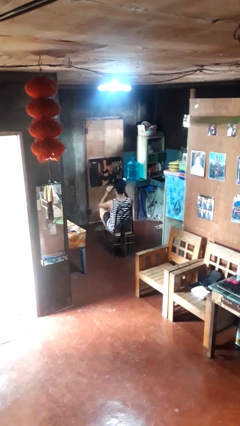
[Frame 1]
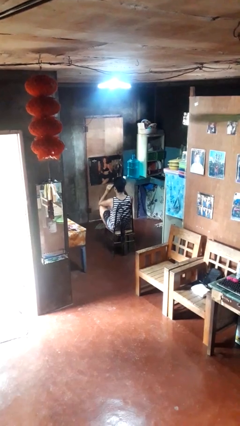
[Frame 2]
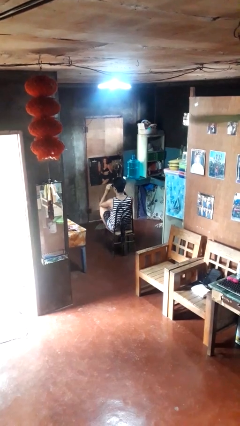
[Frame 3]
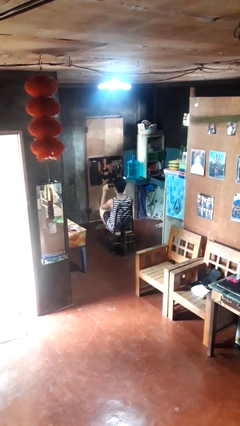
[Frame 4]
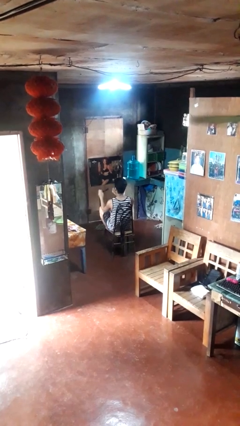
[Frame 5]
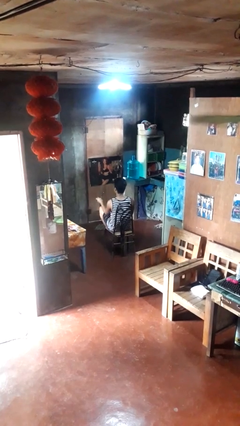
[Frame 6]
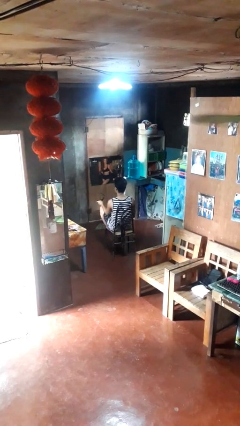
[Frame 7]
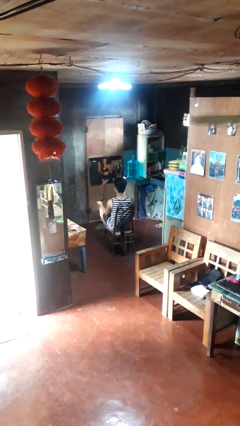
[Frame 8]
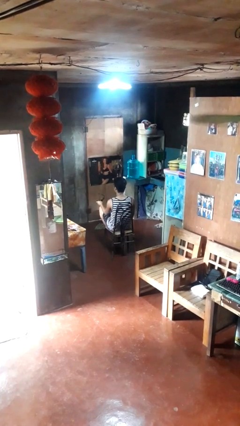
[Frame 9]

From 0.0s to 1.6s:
person takes off sunglasses

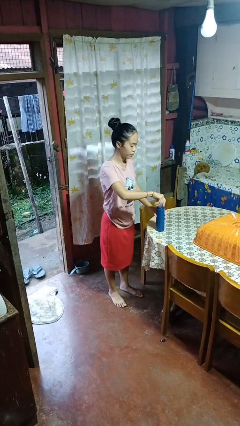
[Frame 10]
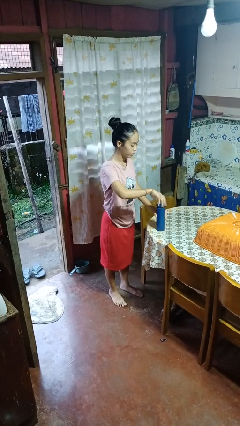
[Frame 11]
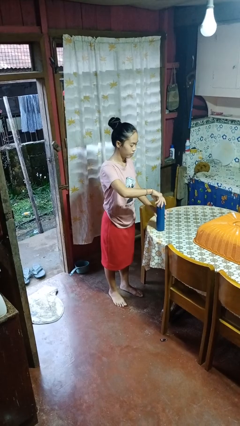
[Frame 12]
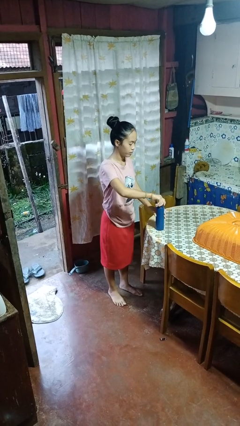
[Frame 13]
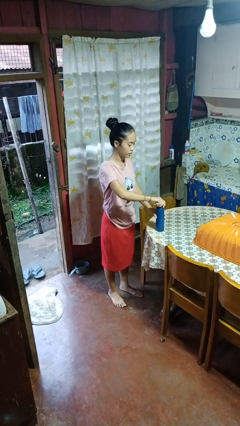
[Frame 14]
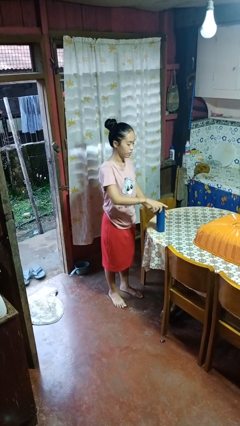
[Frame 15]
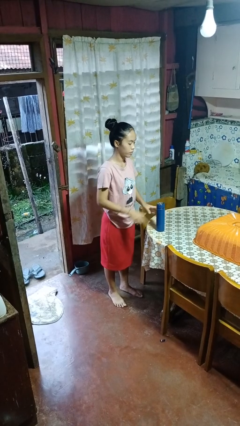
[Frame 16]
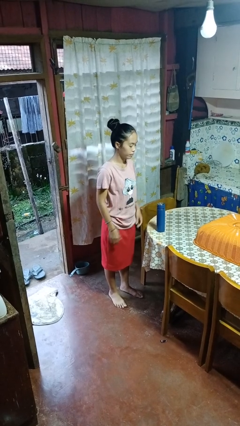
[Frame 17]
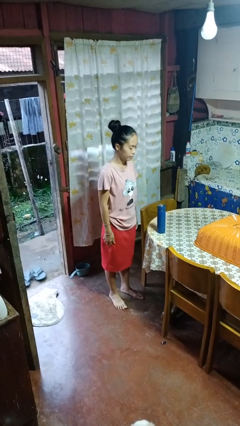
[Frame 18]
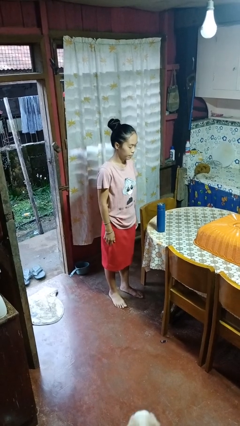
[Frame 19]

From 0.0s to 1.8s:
person closes jar

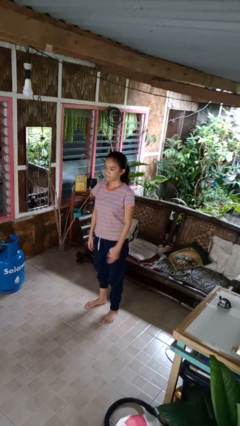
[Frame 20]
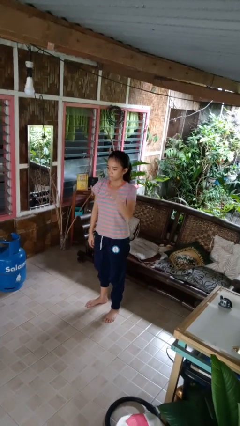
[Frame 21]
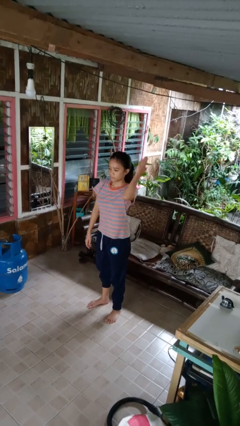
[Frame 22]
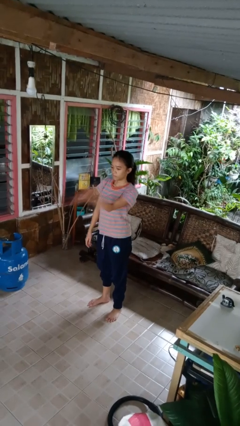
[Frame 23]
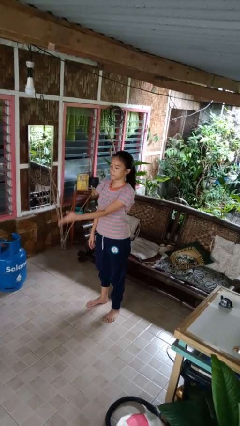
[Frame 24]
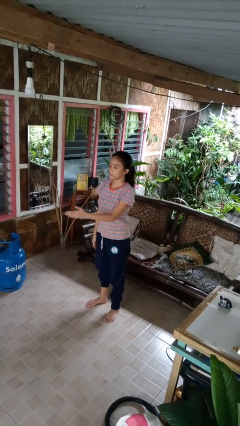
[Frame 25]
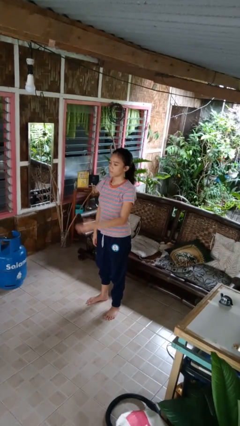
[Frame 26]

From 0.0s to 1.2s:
person karate chop

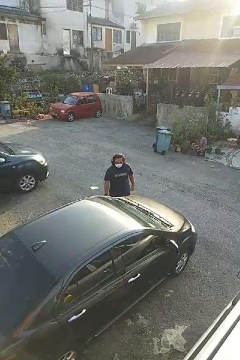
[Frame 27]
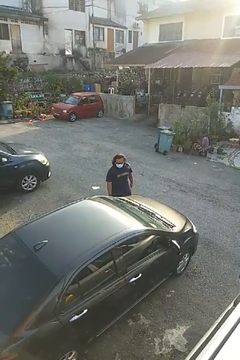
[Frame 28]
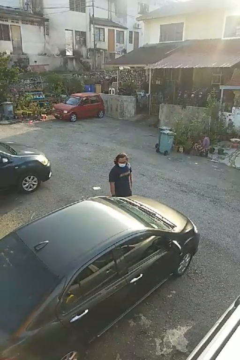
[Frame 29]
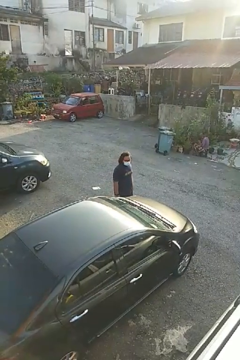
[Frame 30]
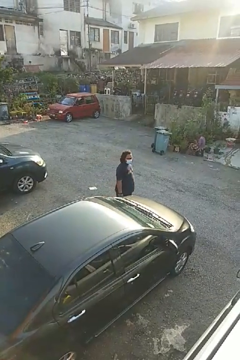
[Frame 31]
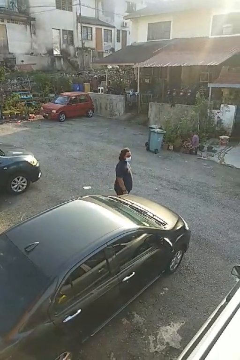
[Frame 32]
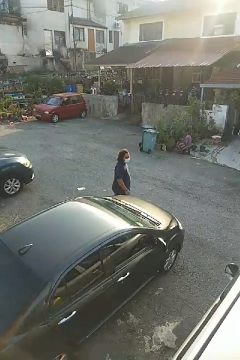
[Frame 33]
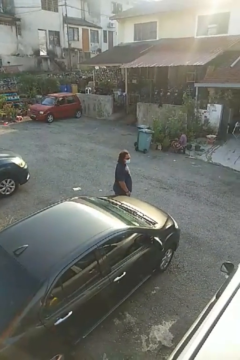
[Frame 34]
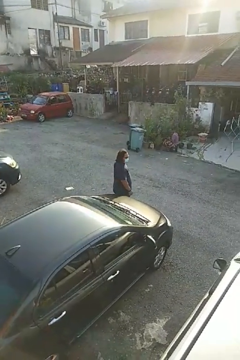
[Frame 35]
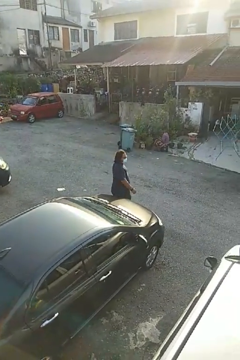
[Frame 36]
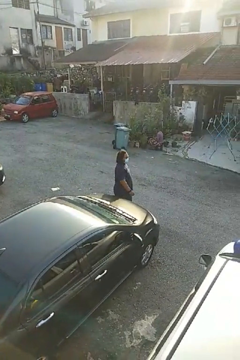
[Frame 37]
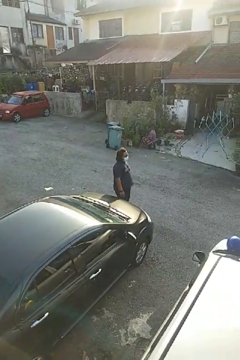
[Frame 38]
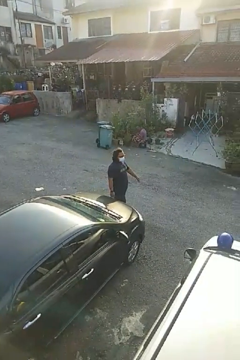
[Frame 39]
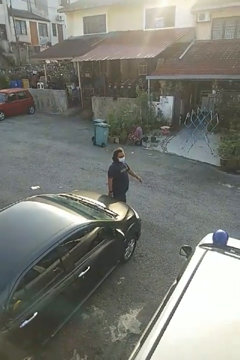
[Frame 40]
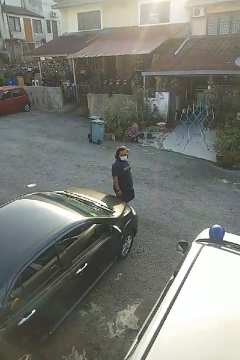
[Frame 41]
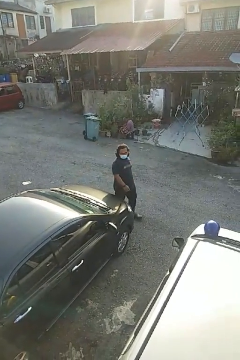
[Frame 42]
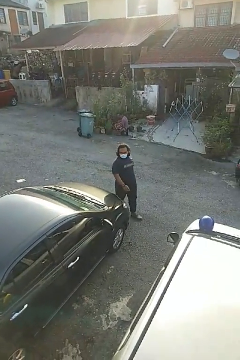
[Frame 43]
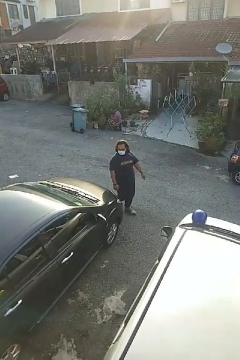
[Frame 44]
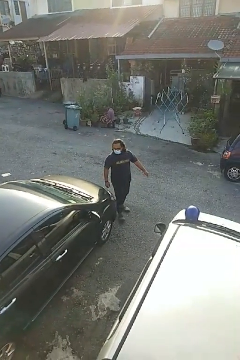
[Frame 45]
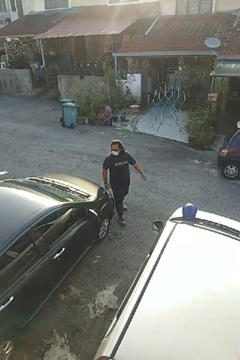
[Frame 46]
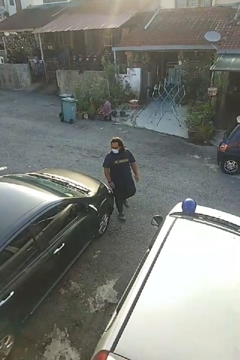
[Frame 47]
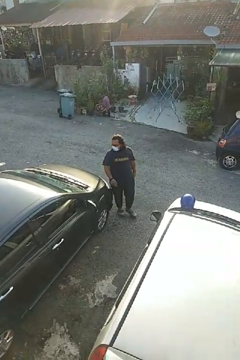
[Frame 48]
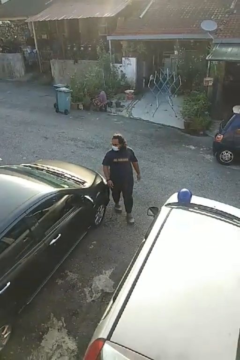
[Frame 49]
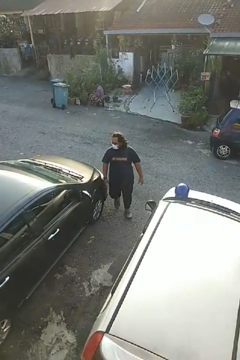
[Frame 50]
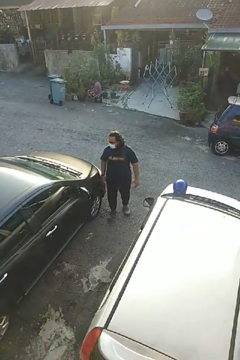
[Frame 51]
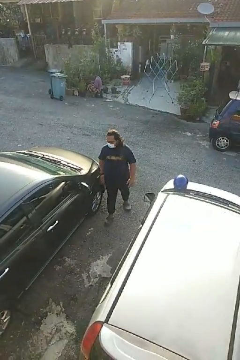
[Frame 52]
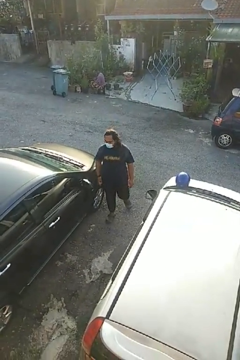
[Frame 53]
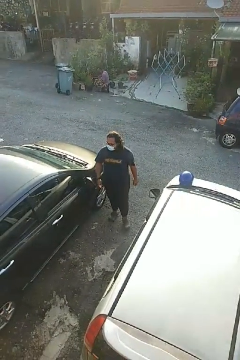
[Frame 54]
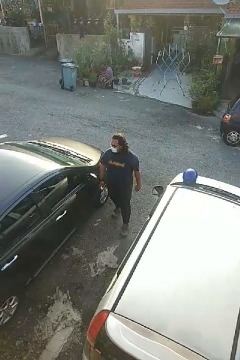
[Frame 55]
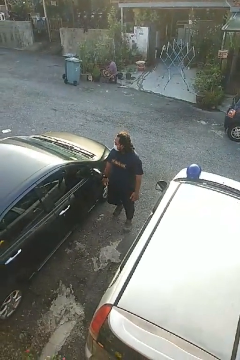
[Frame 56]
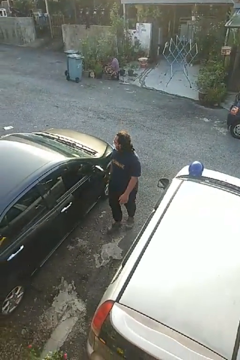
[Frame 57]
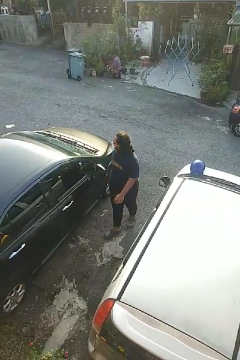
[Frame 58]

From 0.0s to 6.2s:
person walks around car

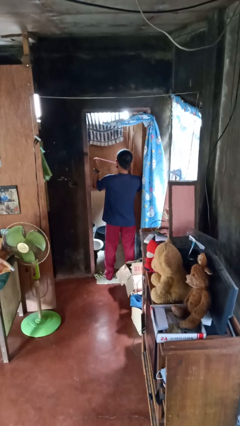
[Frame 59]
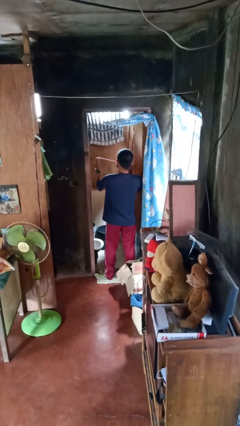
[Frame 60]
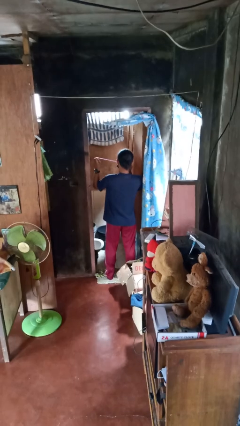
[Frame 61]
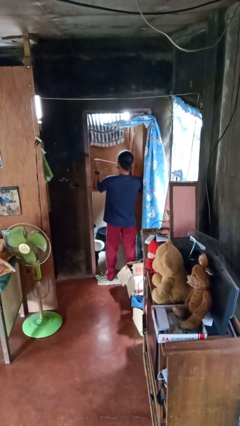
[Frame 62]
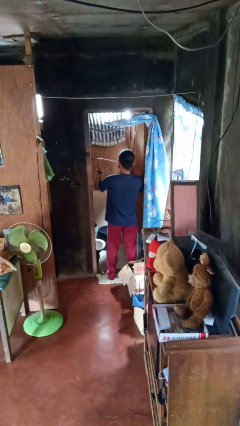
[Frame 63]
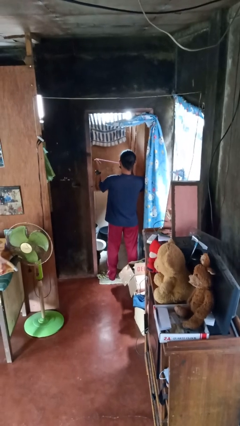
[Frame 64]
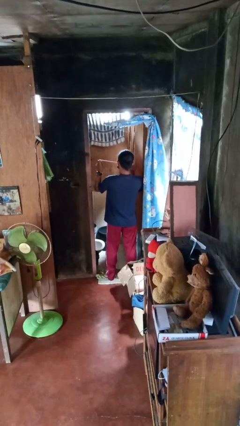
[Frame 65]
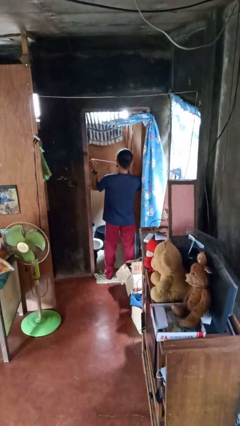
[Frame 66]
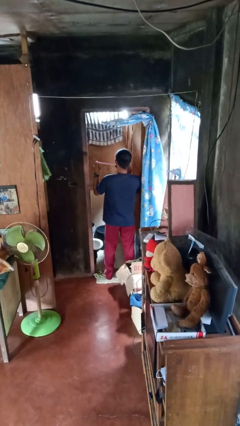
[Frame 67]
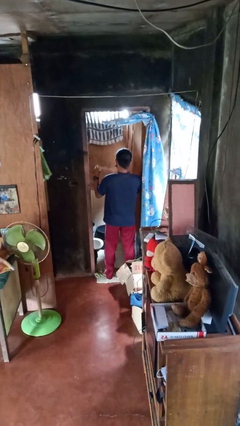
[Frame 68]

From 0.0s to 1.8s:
person flosses

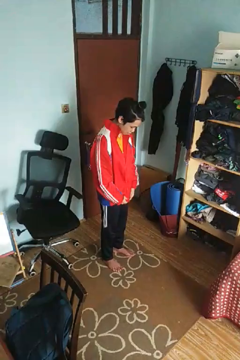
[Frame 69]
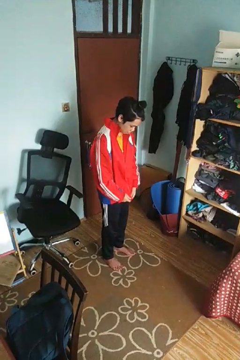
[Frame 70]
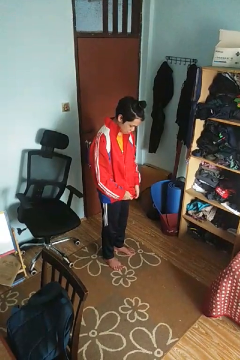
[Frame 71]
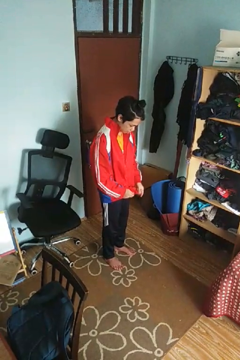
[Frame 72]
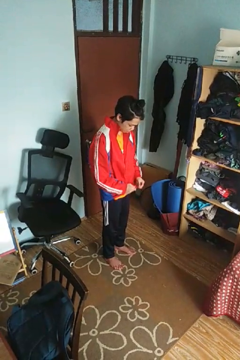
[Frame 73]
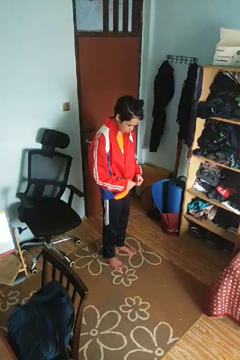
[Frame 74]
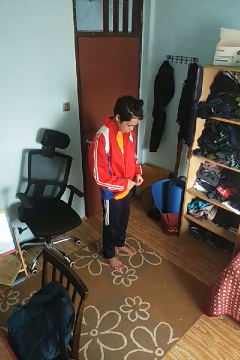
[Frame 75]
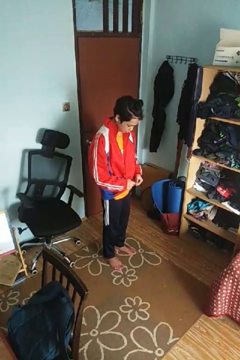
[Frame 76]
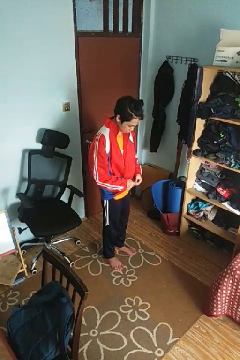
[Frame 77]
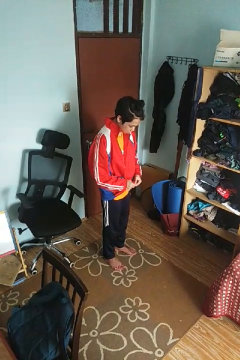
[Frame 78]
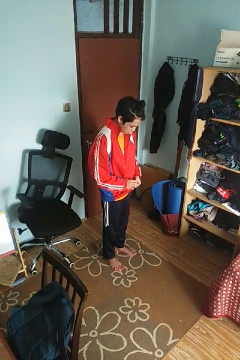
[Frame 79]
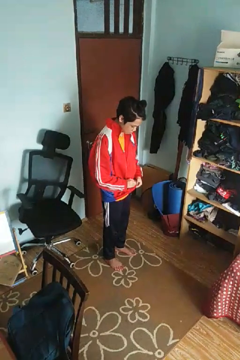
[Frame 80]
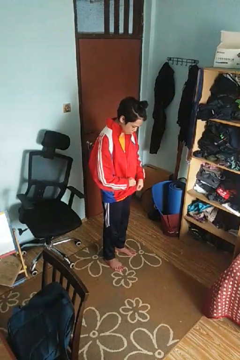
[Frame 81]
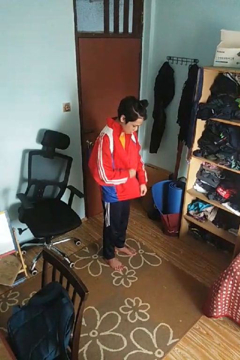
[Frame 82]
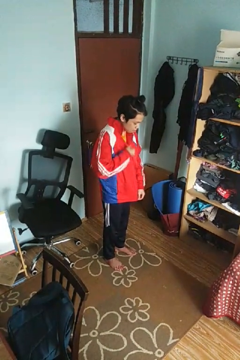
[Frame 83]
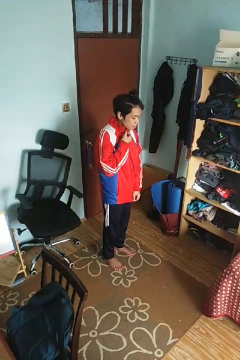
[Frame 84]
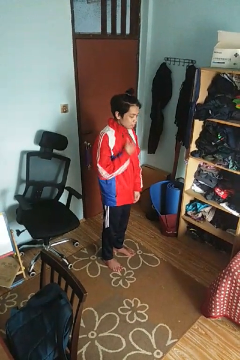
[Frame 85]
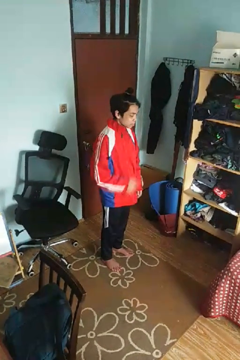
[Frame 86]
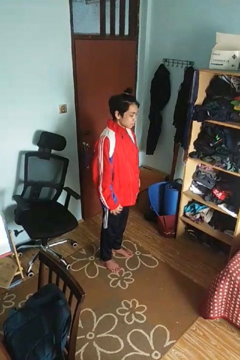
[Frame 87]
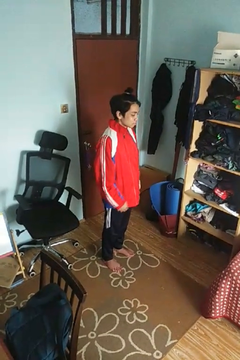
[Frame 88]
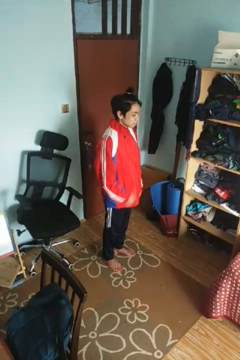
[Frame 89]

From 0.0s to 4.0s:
person zips up jacket

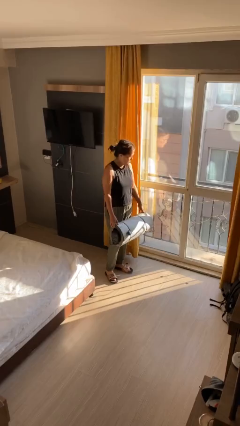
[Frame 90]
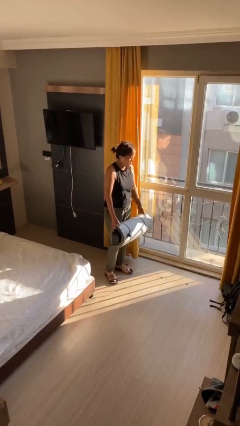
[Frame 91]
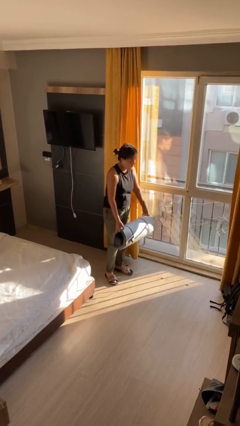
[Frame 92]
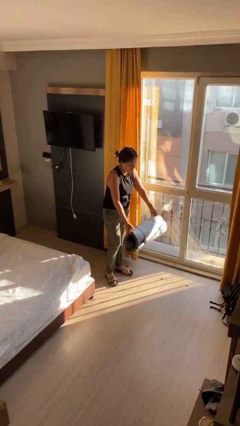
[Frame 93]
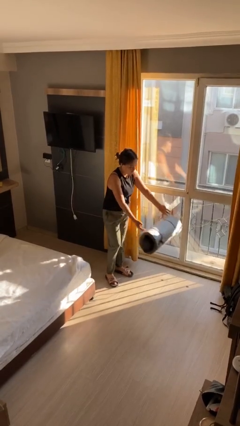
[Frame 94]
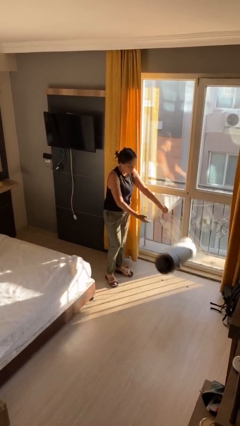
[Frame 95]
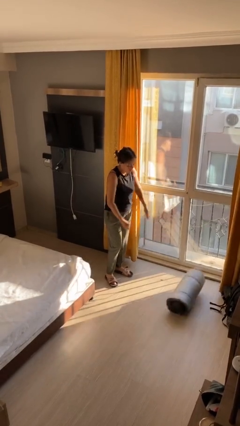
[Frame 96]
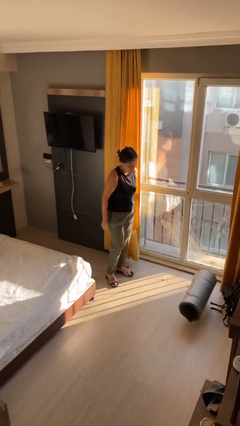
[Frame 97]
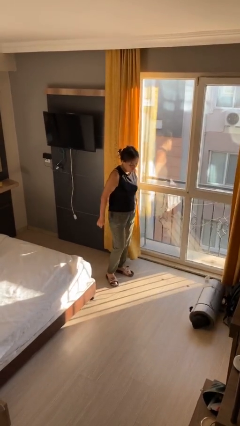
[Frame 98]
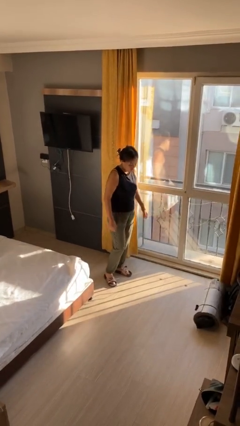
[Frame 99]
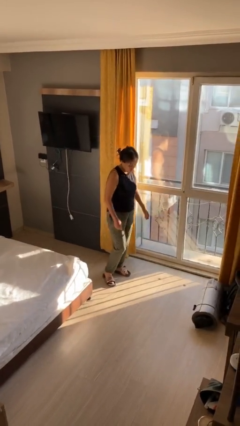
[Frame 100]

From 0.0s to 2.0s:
person throws object to ground

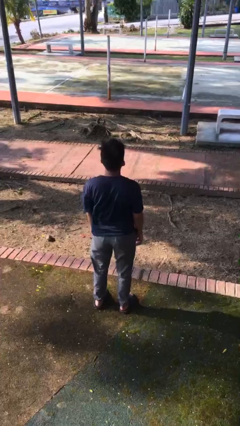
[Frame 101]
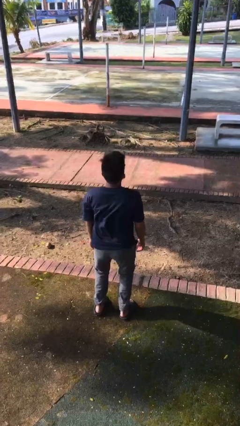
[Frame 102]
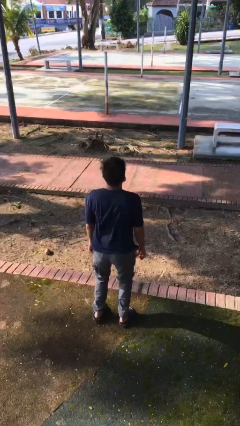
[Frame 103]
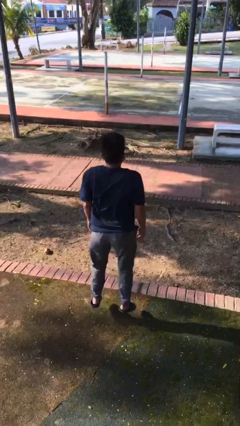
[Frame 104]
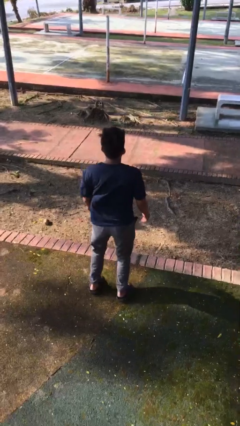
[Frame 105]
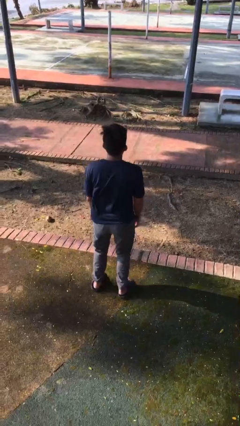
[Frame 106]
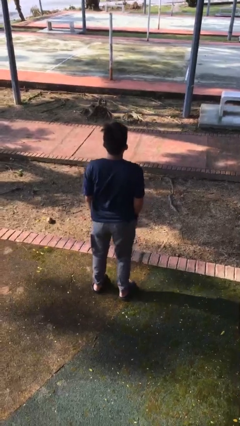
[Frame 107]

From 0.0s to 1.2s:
person jumps
